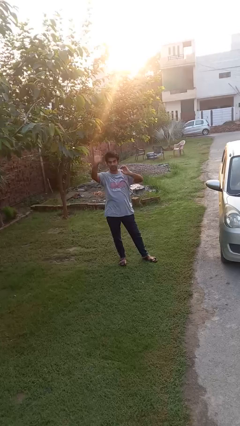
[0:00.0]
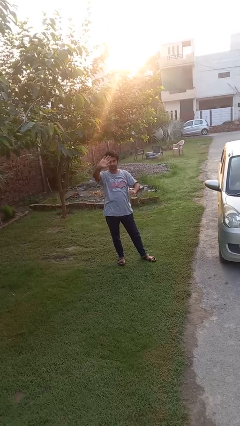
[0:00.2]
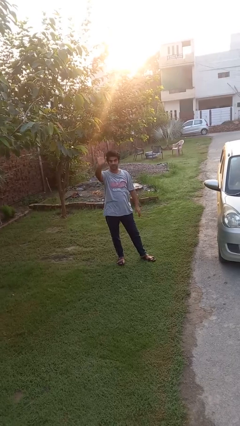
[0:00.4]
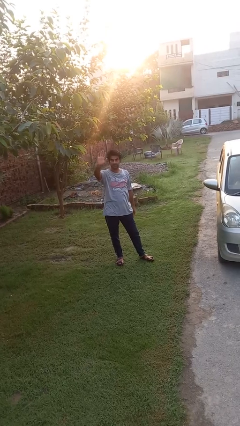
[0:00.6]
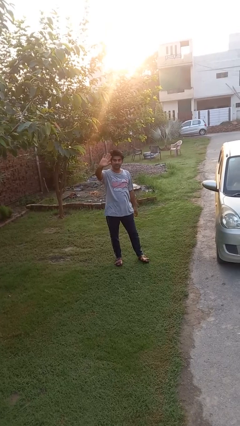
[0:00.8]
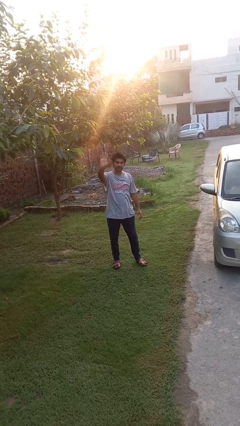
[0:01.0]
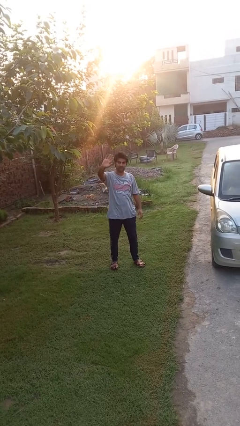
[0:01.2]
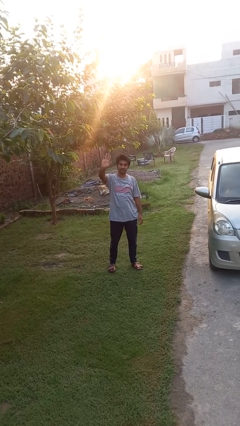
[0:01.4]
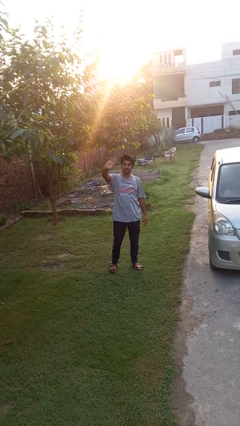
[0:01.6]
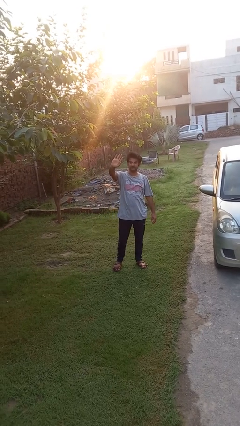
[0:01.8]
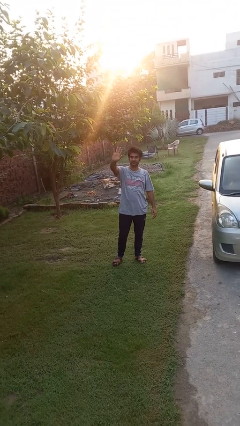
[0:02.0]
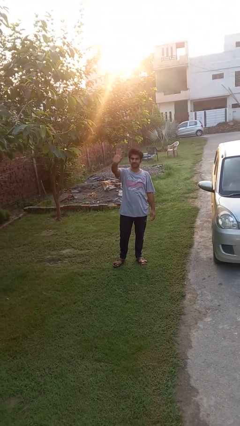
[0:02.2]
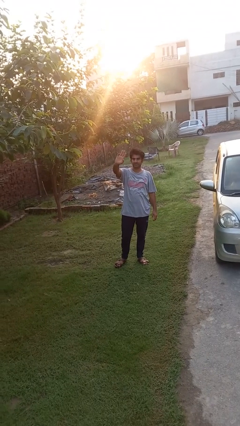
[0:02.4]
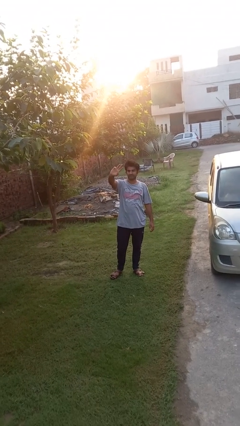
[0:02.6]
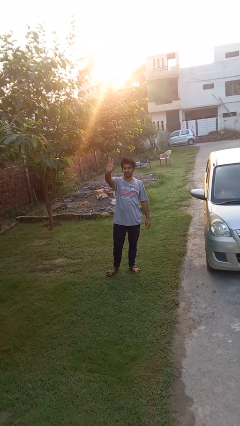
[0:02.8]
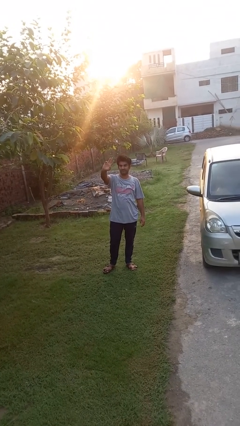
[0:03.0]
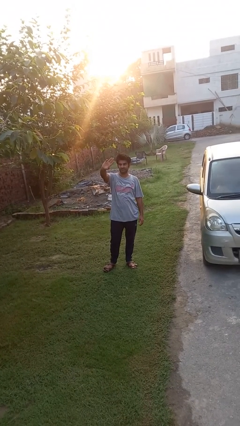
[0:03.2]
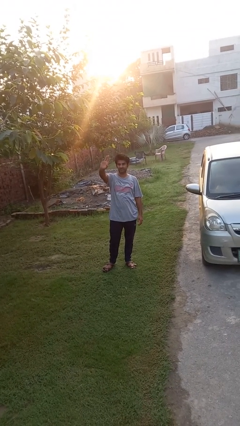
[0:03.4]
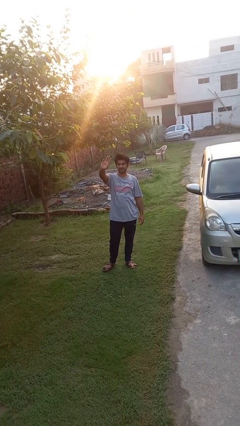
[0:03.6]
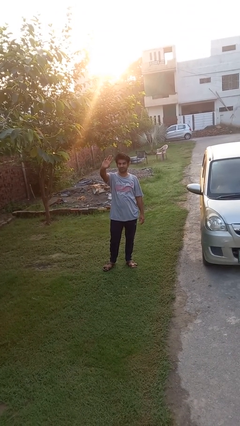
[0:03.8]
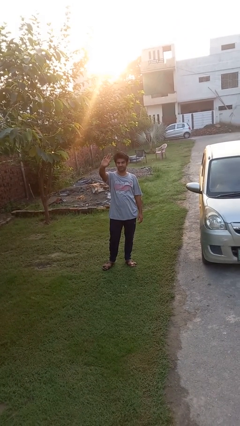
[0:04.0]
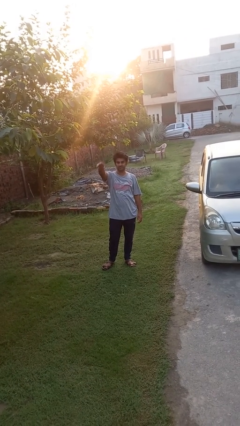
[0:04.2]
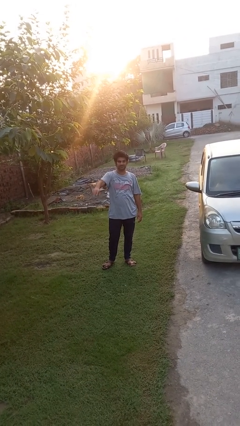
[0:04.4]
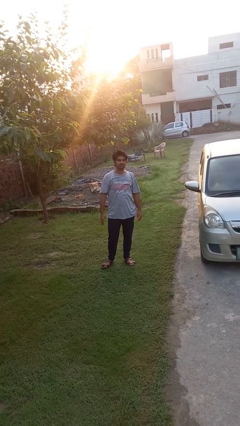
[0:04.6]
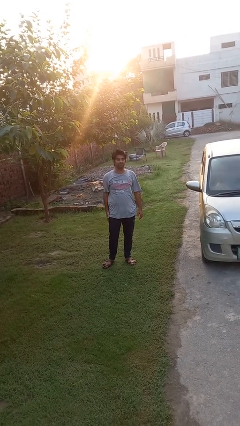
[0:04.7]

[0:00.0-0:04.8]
person waves at person

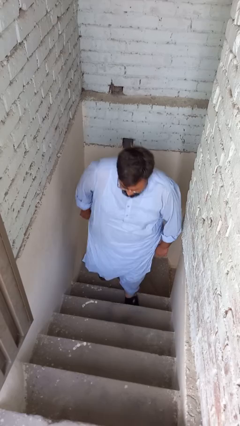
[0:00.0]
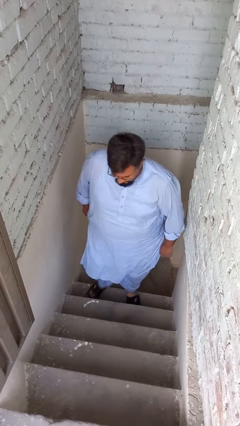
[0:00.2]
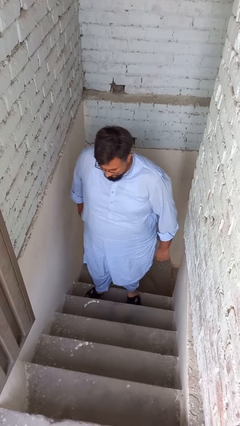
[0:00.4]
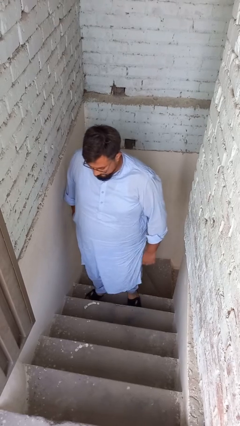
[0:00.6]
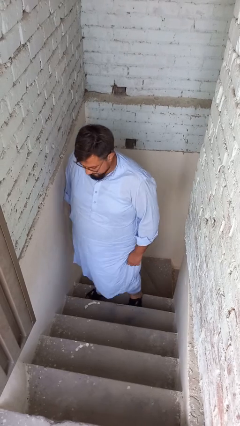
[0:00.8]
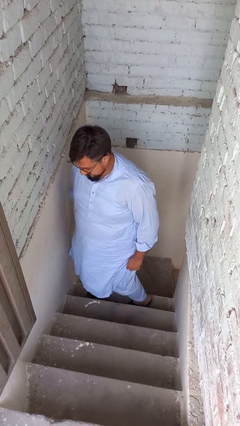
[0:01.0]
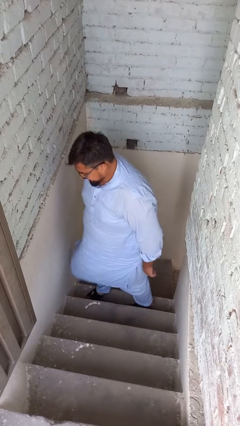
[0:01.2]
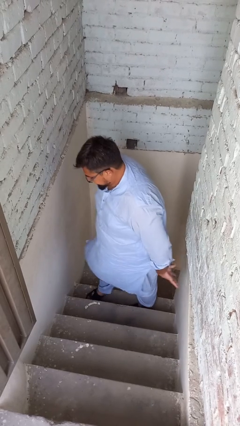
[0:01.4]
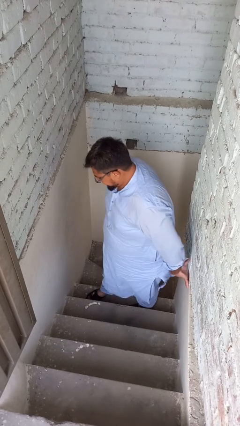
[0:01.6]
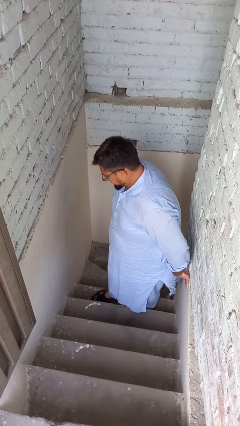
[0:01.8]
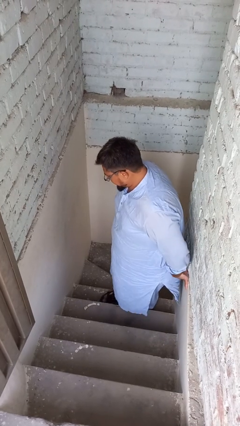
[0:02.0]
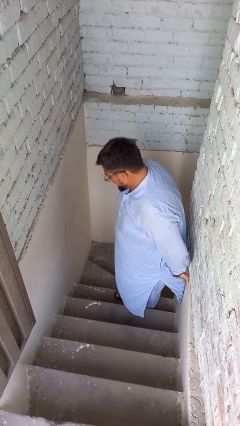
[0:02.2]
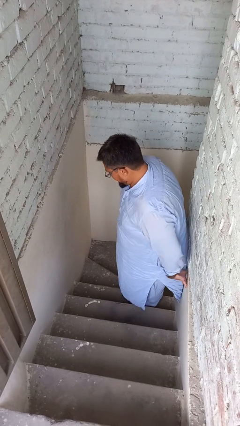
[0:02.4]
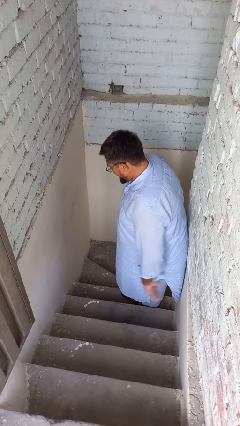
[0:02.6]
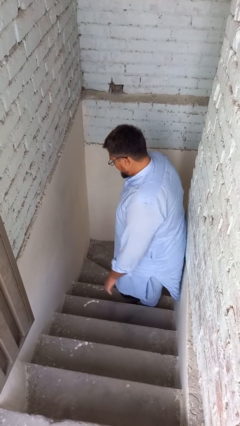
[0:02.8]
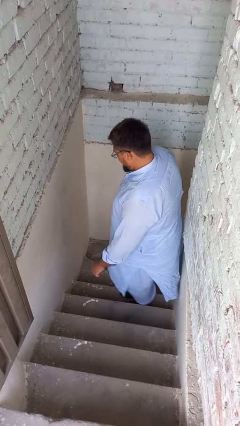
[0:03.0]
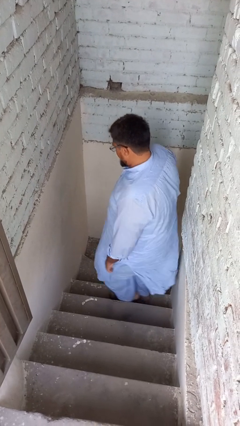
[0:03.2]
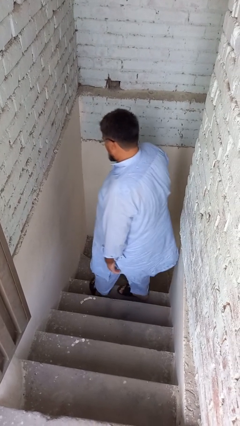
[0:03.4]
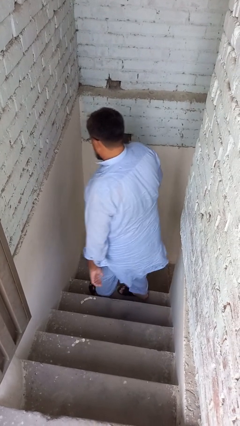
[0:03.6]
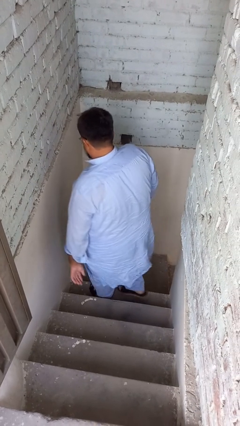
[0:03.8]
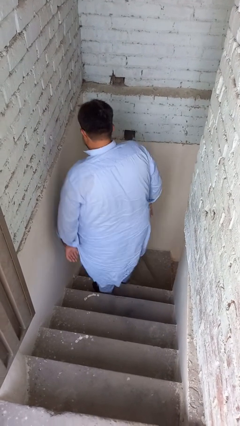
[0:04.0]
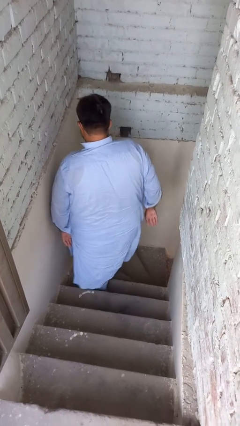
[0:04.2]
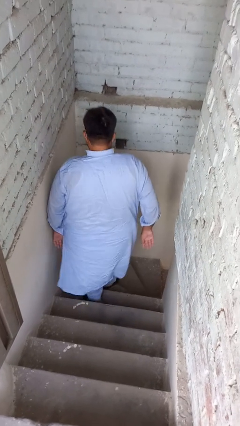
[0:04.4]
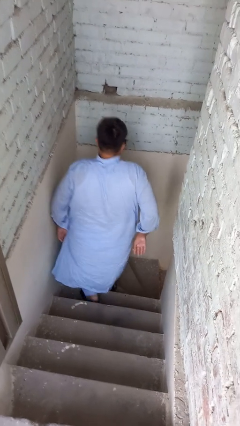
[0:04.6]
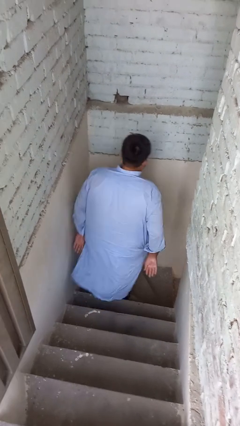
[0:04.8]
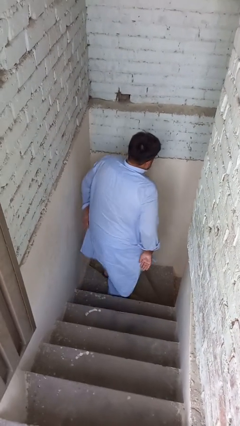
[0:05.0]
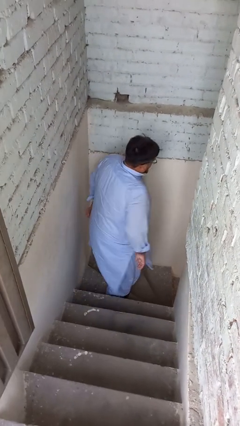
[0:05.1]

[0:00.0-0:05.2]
person climbs down stairs

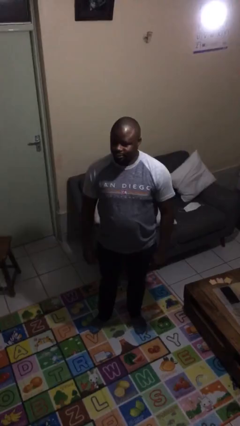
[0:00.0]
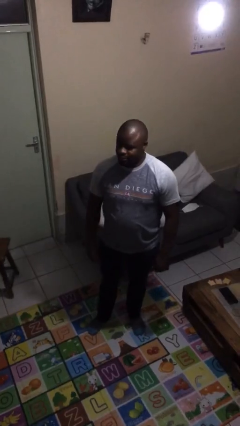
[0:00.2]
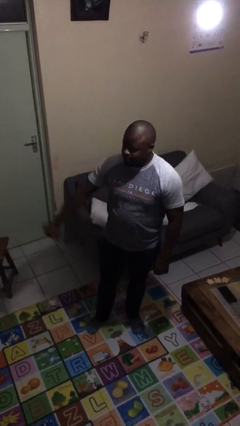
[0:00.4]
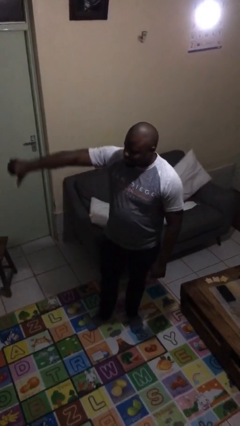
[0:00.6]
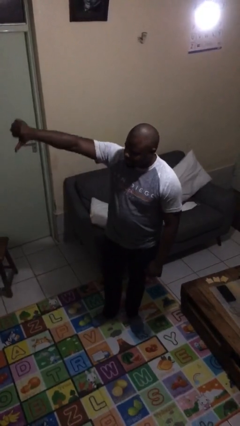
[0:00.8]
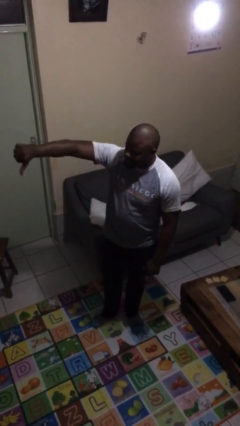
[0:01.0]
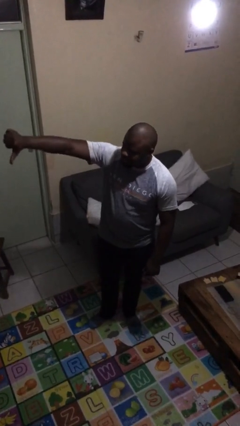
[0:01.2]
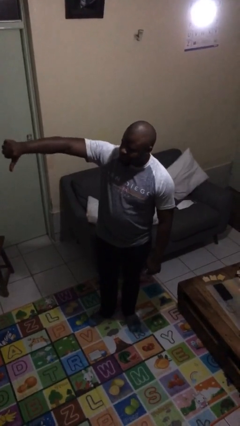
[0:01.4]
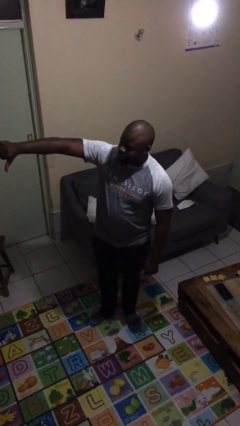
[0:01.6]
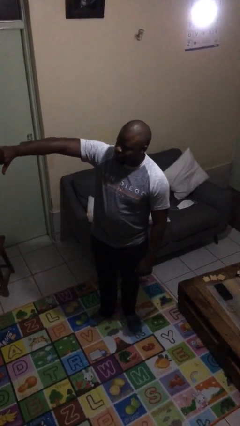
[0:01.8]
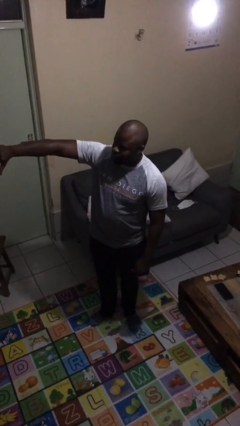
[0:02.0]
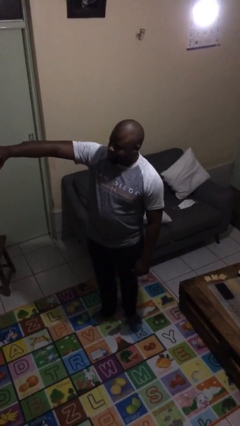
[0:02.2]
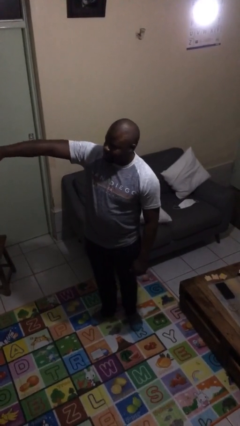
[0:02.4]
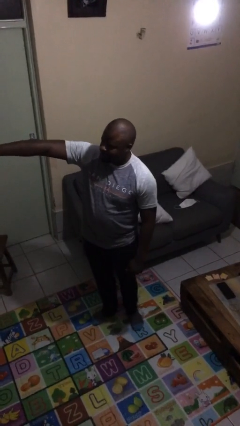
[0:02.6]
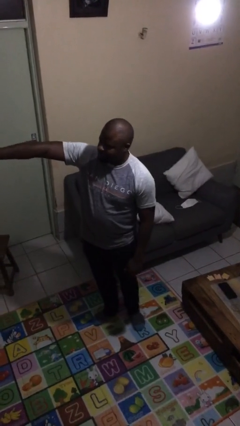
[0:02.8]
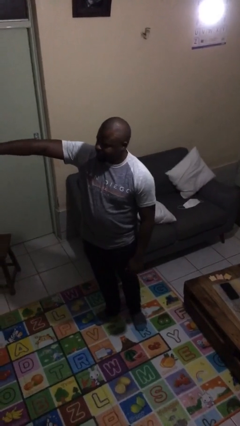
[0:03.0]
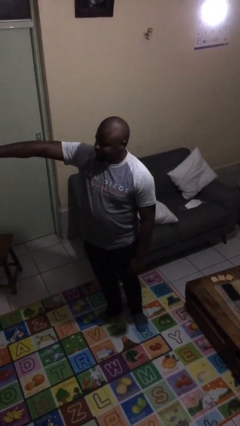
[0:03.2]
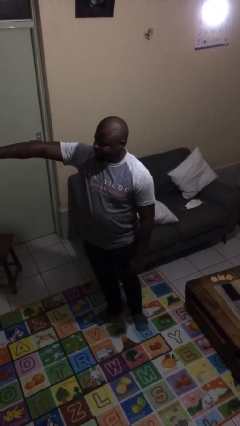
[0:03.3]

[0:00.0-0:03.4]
person gestures thumbs down

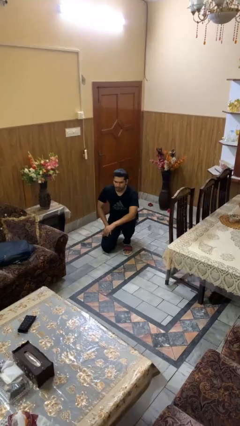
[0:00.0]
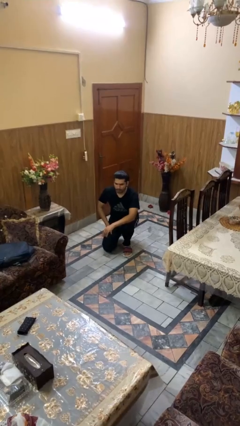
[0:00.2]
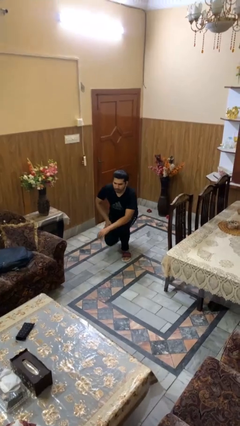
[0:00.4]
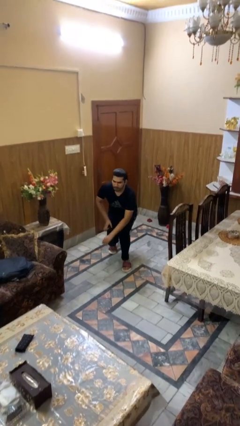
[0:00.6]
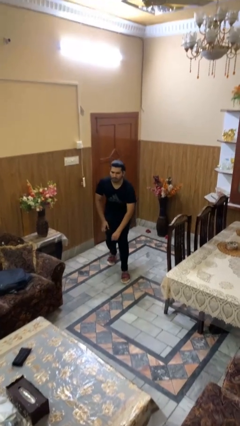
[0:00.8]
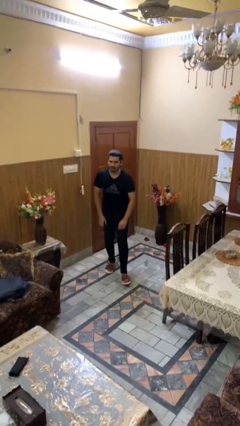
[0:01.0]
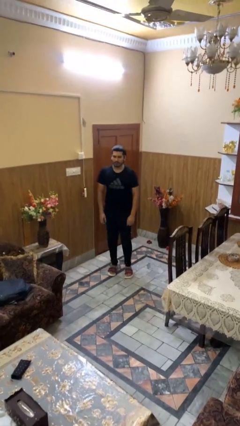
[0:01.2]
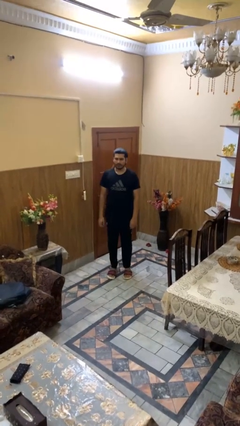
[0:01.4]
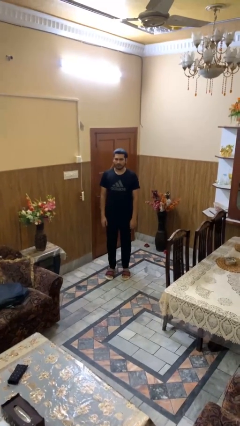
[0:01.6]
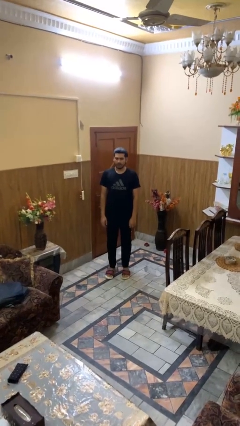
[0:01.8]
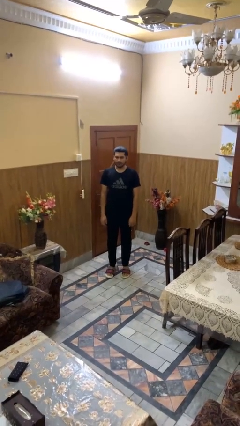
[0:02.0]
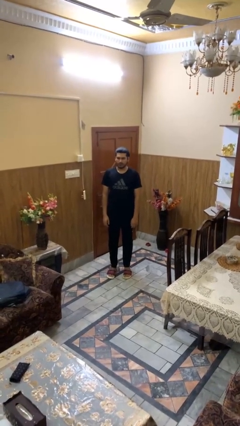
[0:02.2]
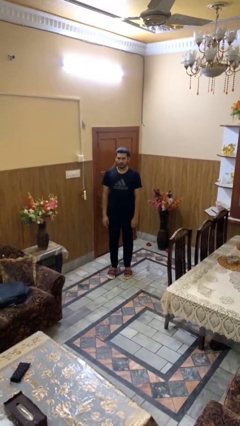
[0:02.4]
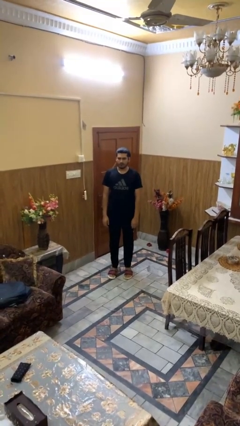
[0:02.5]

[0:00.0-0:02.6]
person stands up from floor

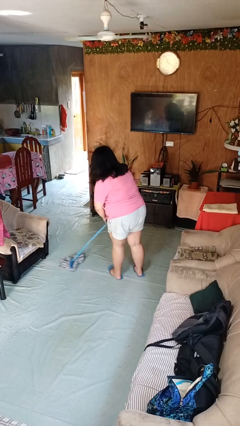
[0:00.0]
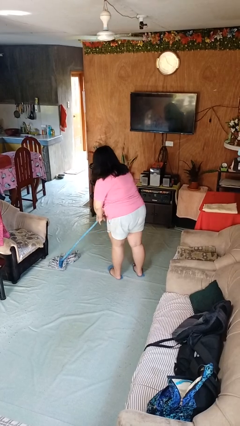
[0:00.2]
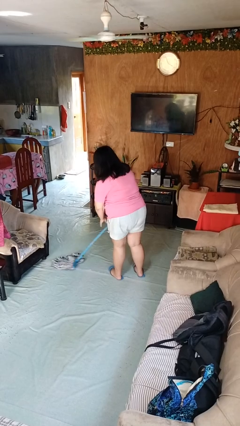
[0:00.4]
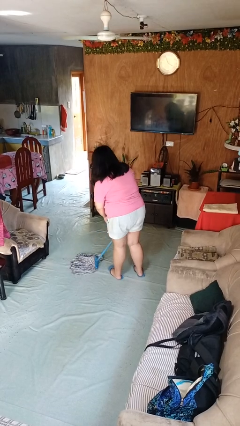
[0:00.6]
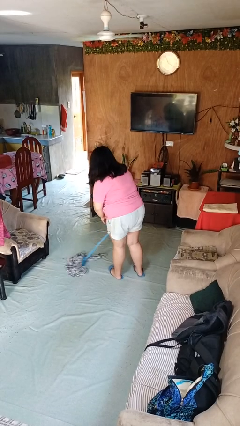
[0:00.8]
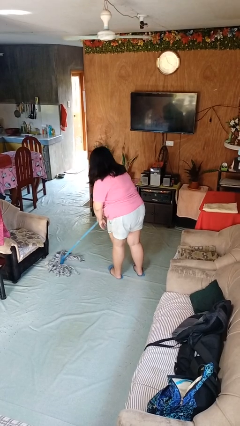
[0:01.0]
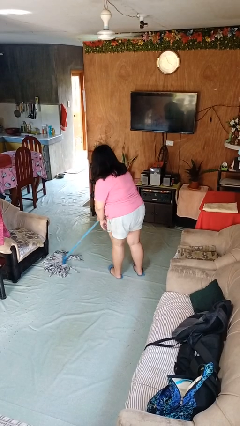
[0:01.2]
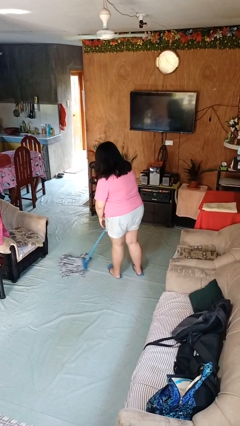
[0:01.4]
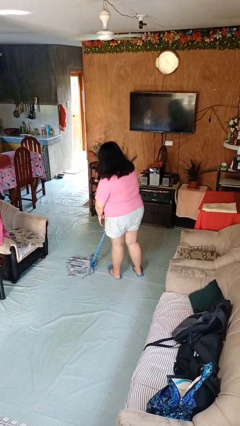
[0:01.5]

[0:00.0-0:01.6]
person mops
